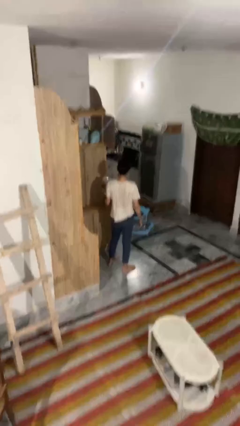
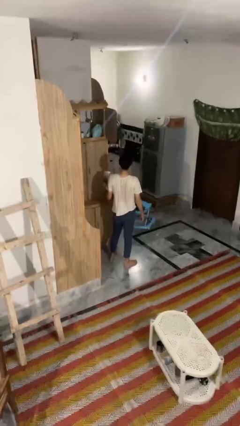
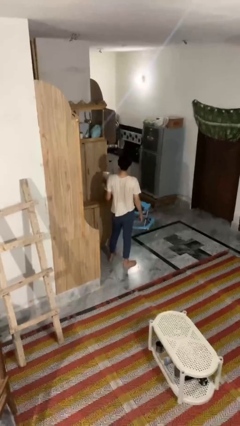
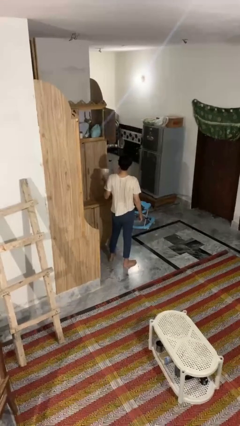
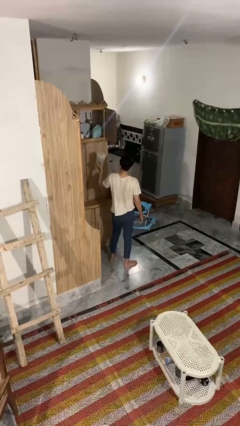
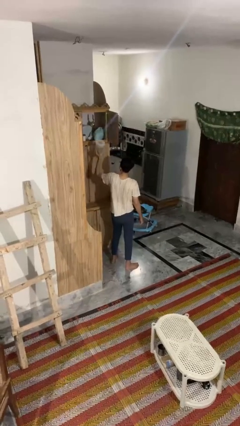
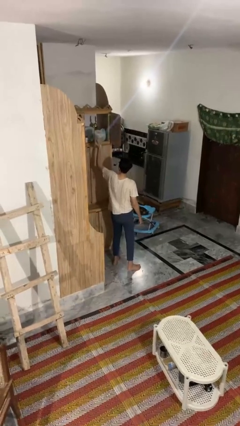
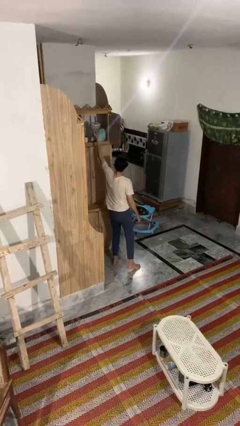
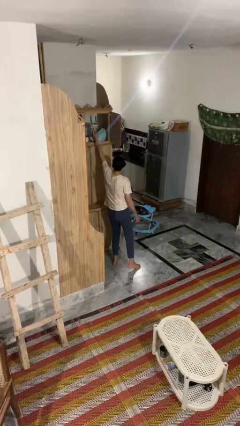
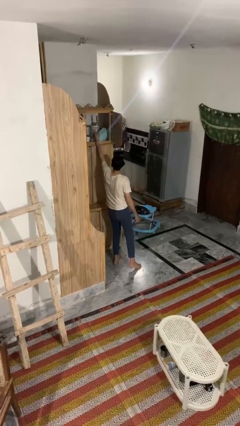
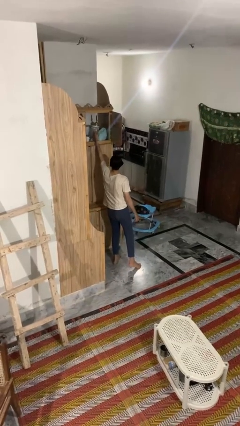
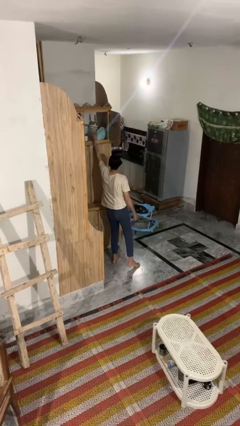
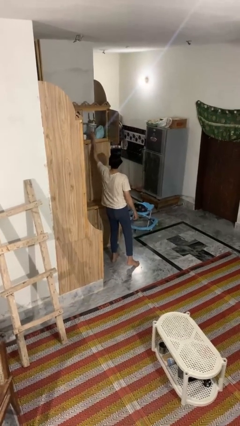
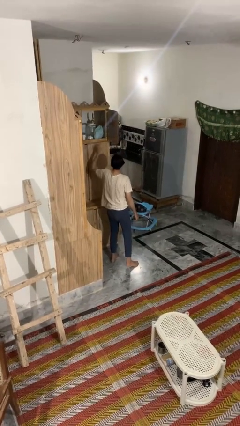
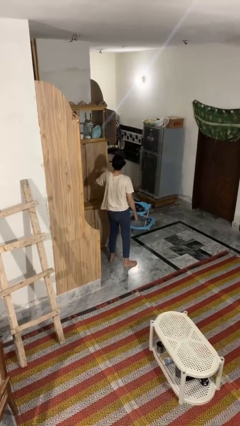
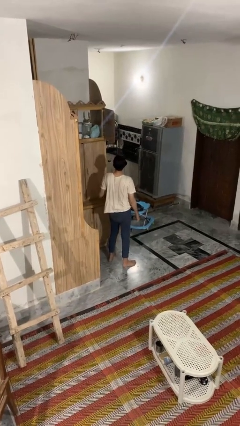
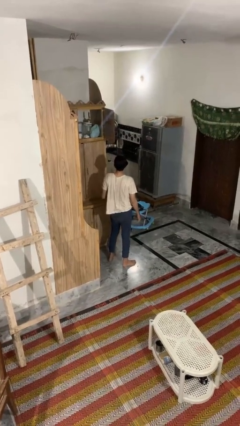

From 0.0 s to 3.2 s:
person puts down object on shelf

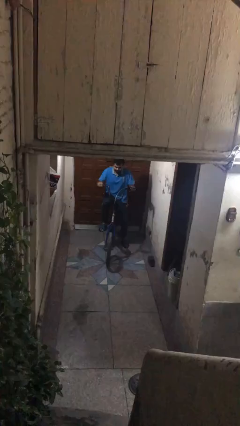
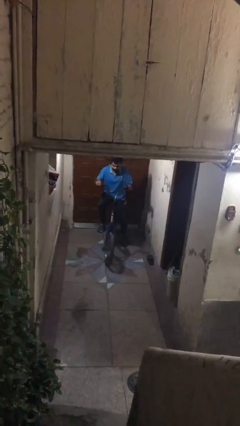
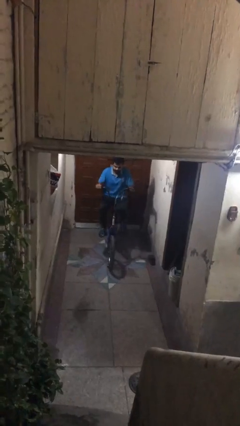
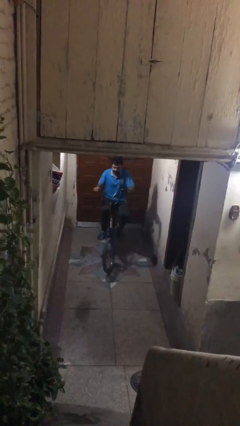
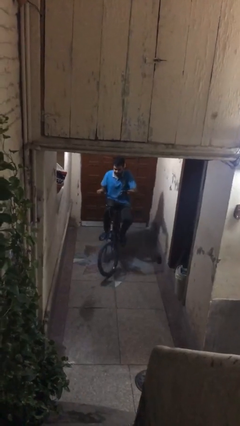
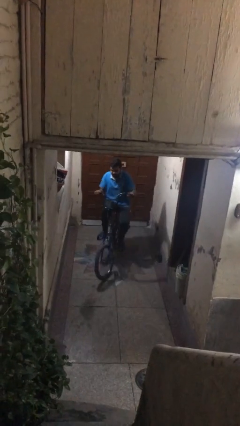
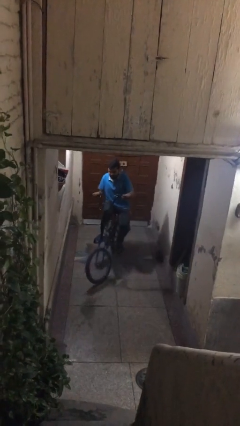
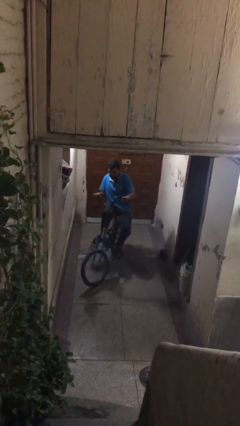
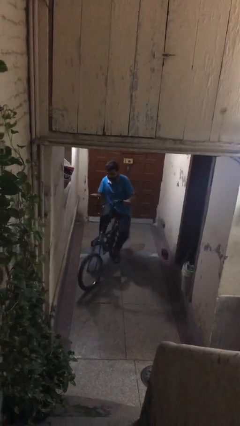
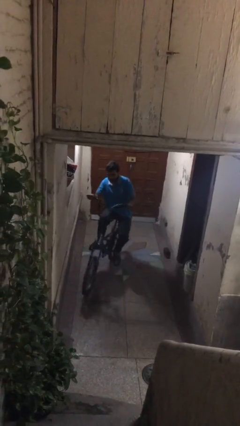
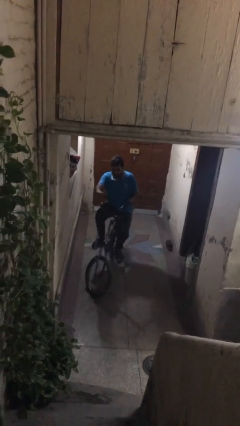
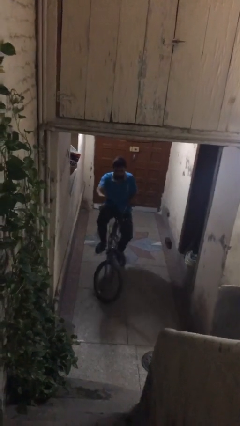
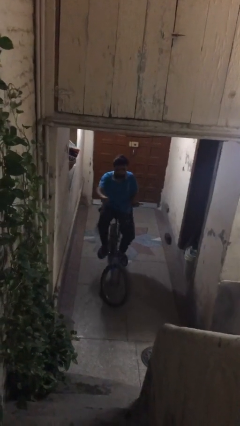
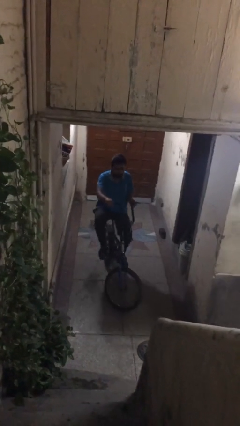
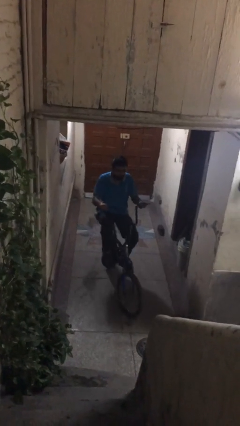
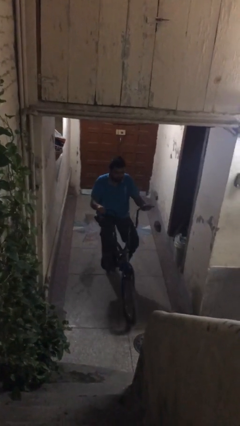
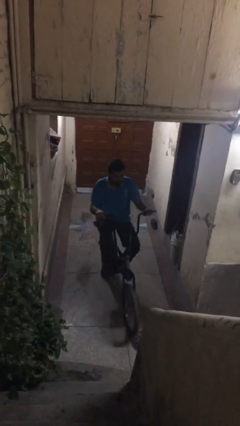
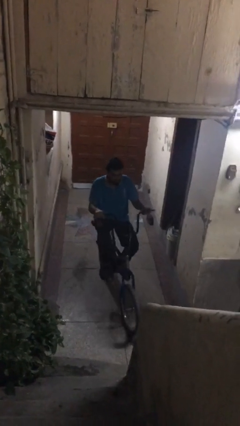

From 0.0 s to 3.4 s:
person rides bicycle

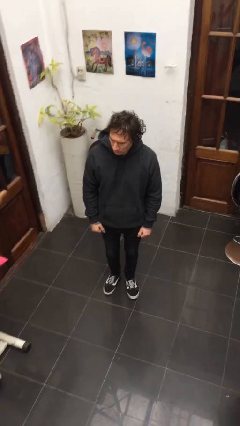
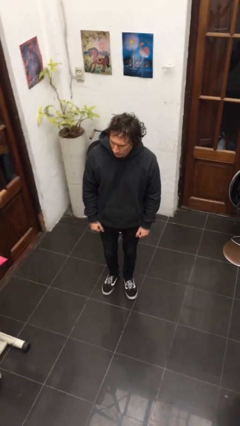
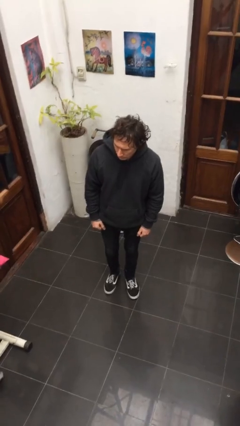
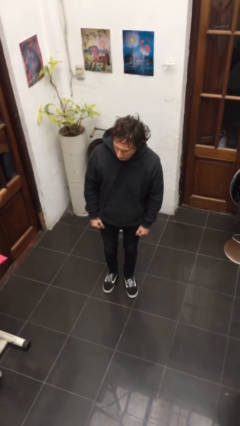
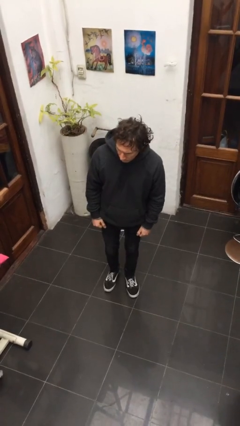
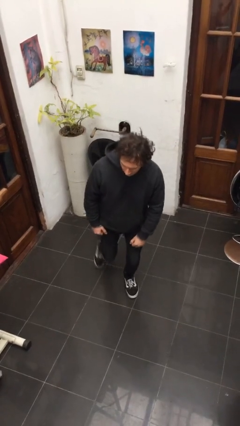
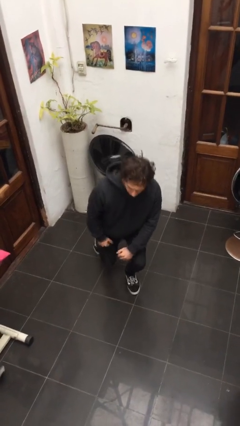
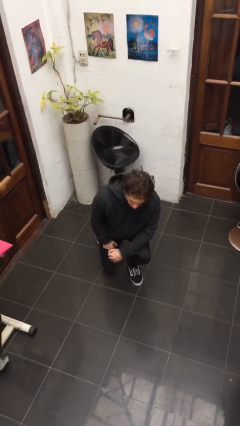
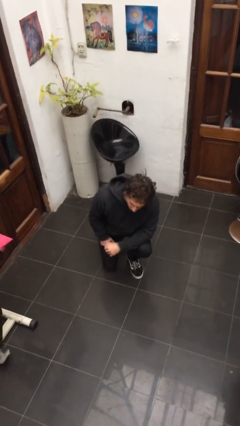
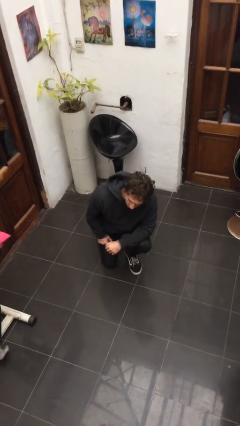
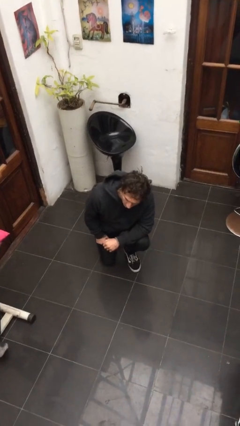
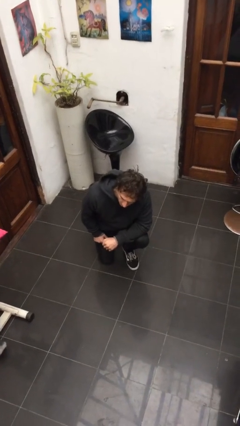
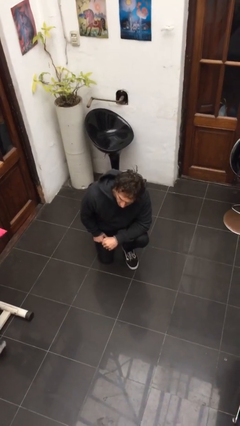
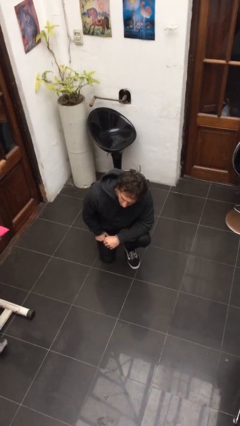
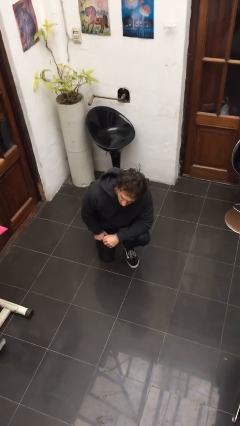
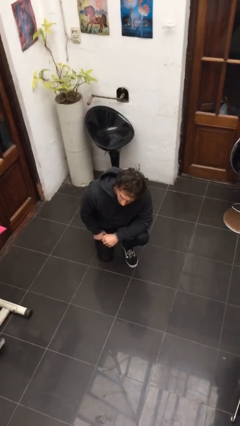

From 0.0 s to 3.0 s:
person kneels

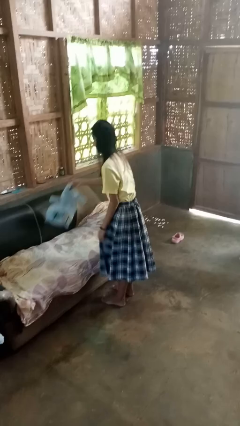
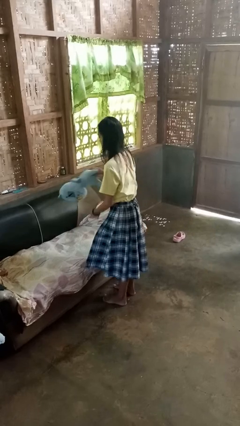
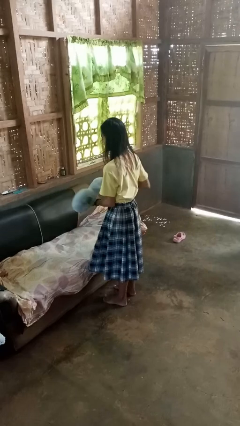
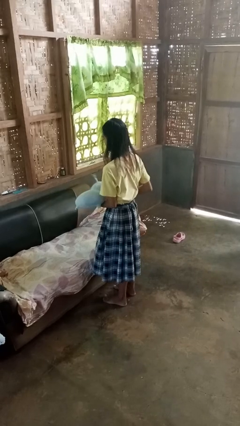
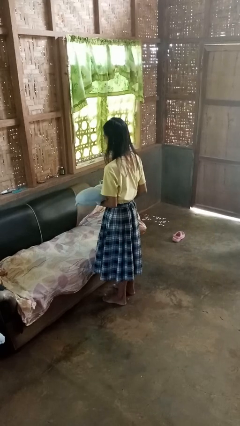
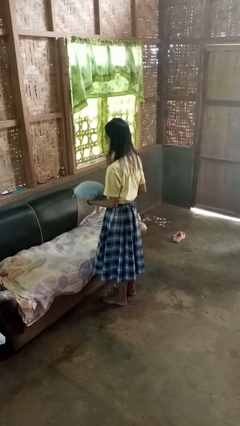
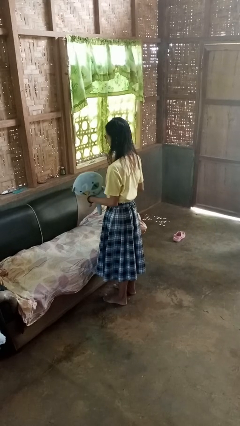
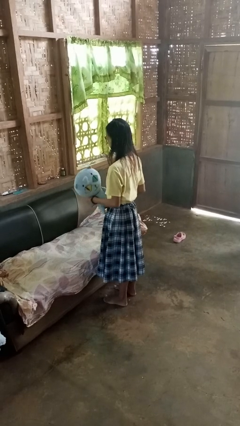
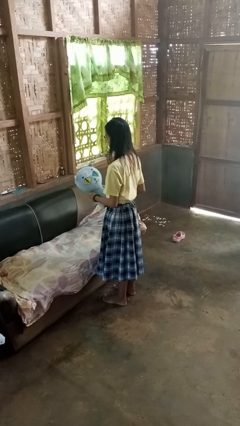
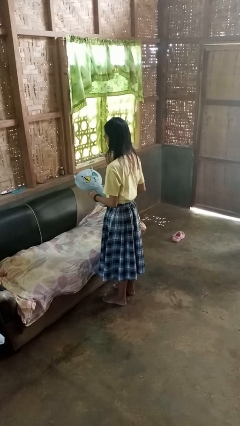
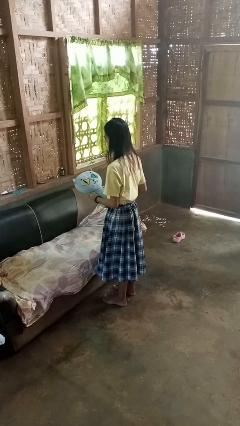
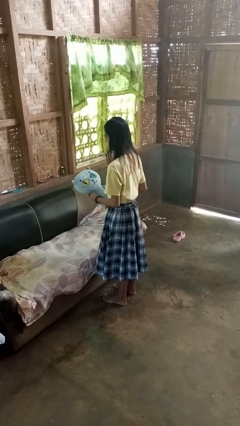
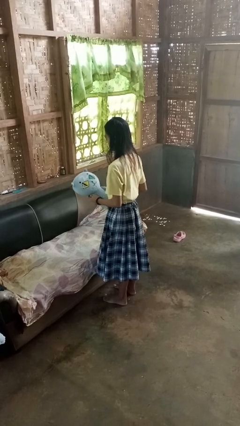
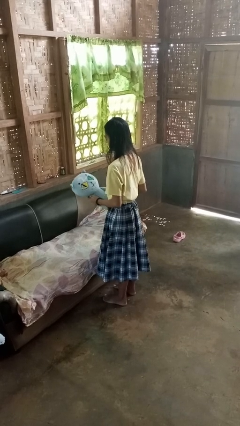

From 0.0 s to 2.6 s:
person picks up object from couch

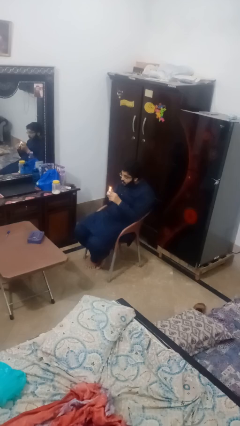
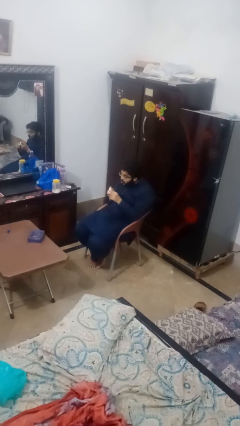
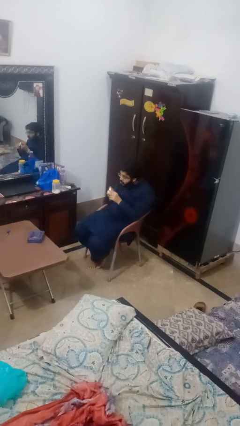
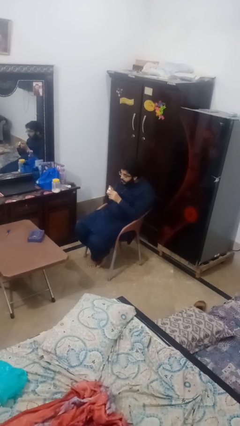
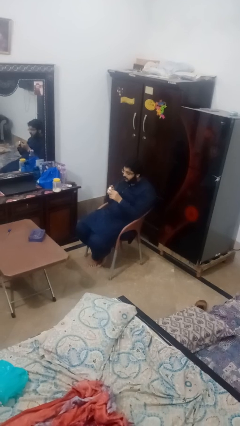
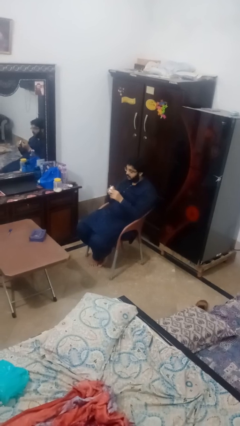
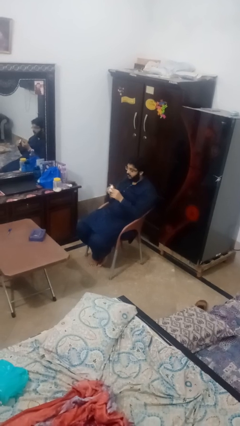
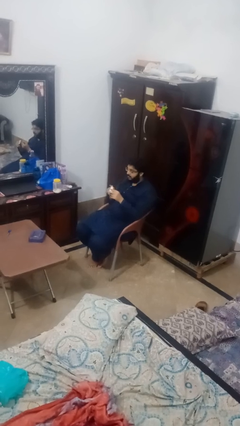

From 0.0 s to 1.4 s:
person extinguishes candle

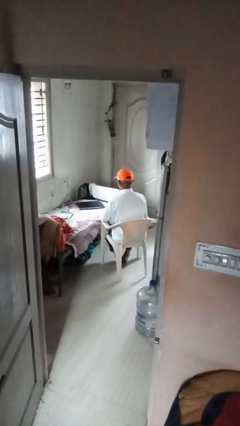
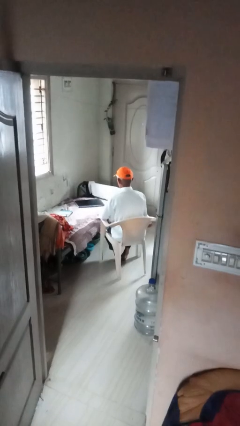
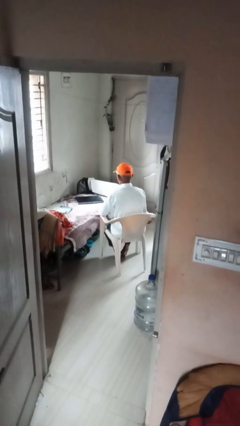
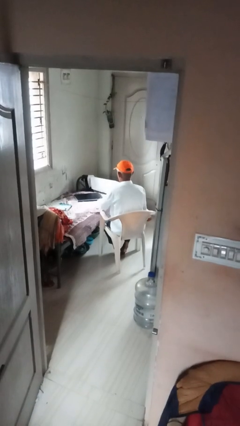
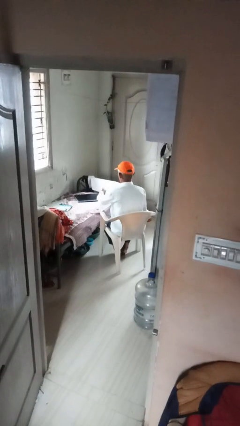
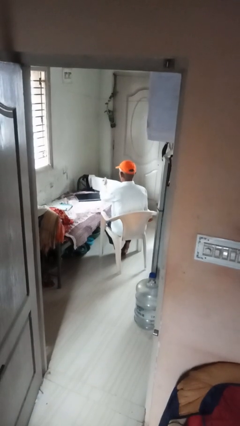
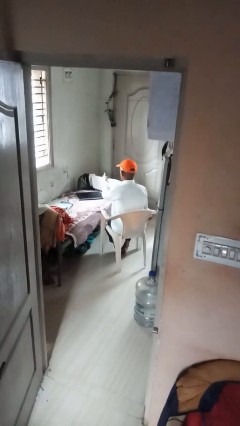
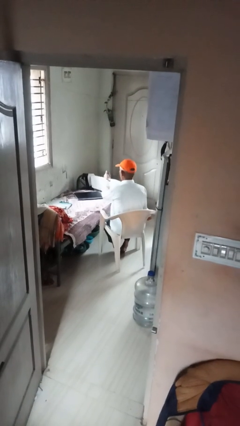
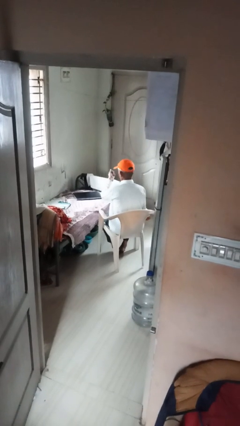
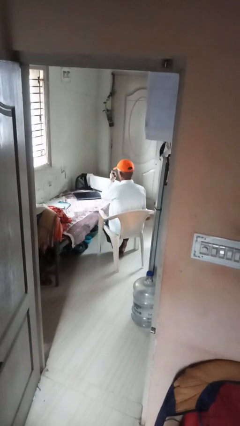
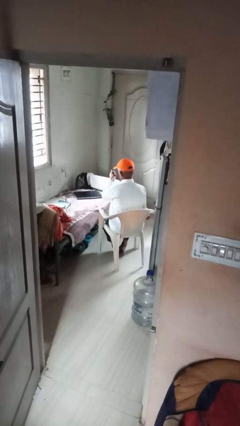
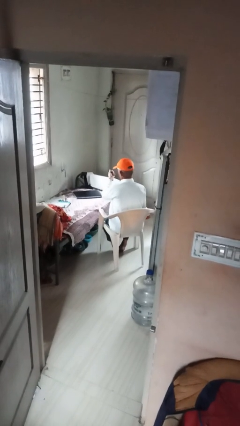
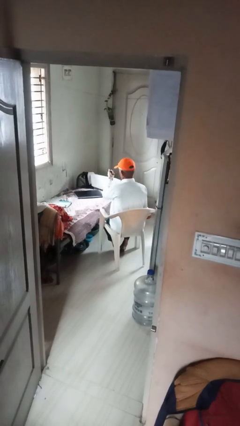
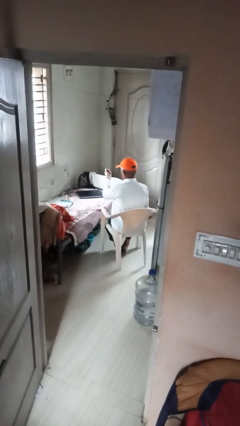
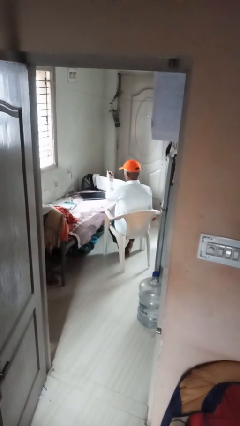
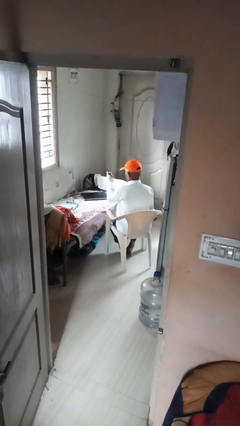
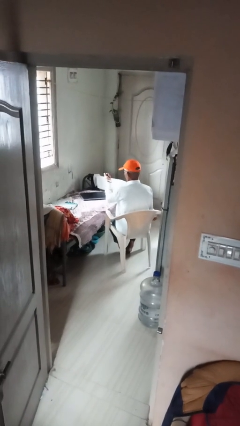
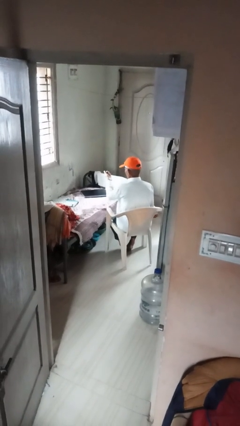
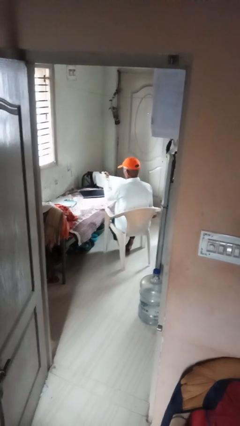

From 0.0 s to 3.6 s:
person looks at wristwatch
